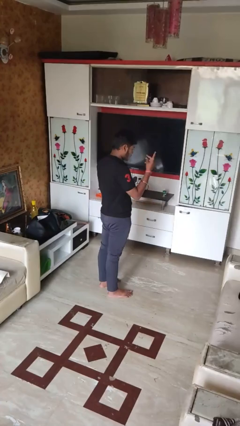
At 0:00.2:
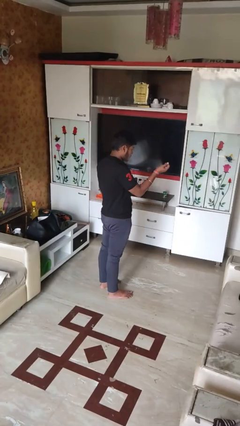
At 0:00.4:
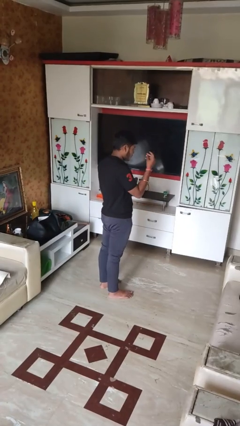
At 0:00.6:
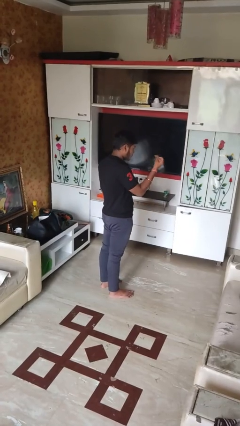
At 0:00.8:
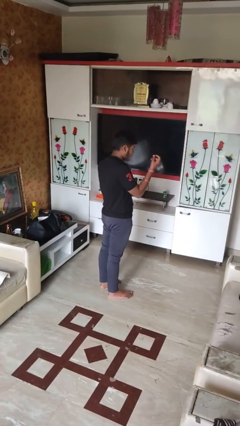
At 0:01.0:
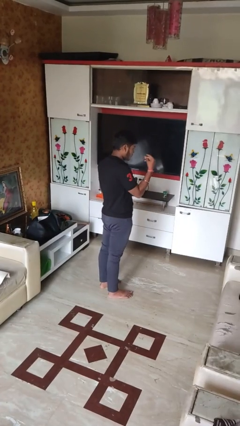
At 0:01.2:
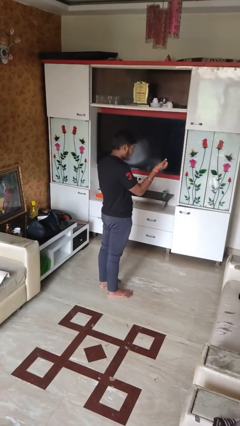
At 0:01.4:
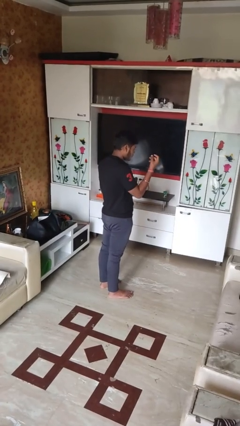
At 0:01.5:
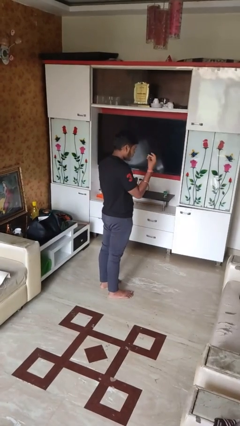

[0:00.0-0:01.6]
person snaps fingers

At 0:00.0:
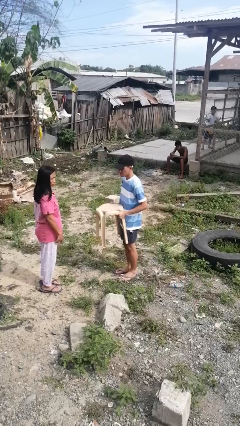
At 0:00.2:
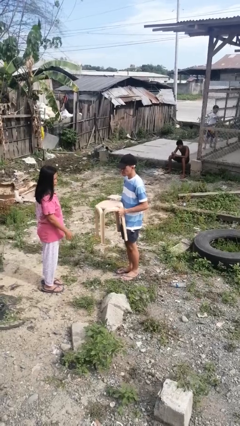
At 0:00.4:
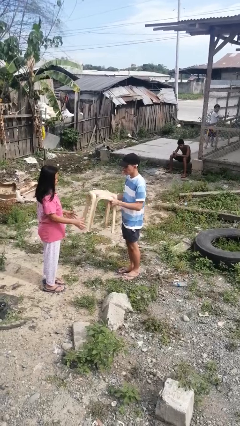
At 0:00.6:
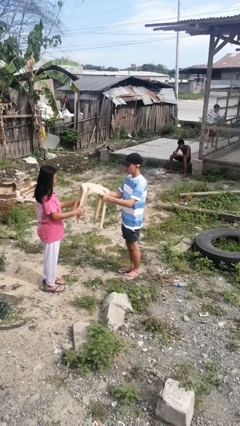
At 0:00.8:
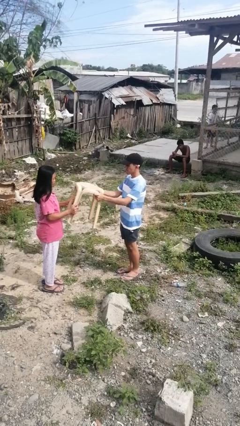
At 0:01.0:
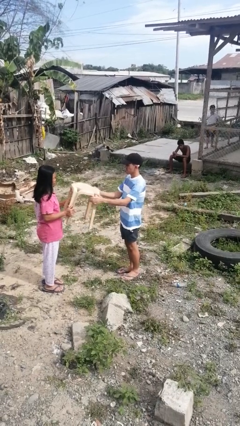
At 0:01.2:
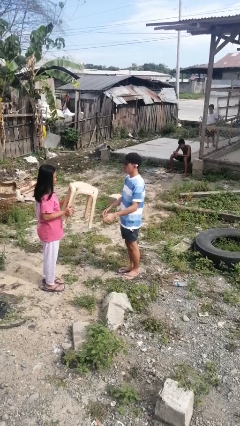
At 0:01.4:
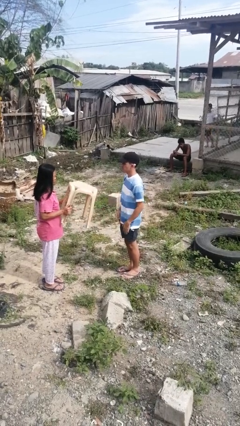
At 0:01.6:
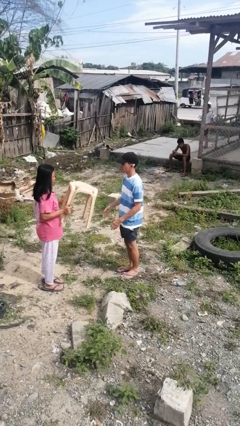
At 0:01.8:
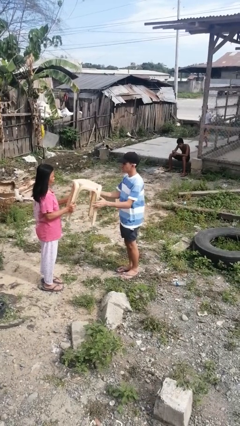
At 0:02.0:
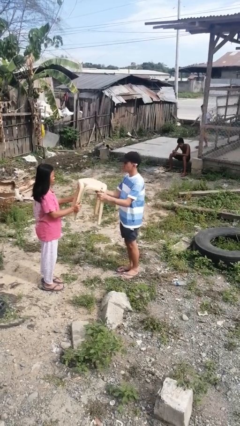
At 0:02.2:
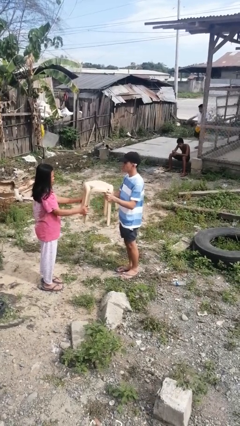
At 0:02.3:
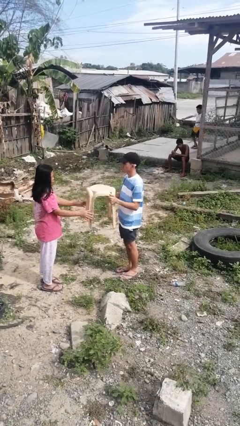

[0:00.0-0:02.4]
person transfers object to person

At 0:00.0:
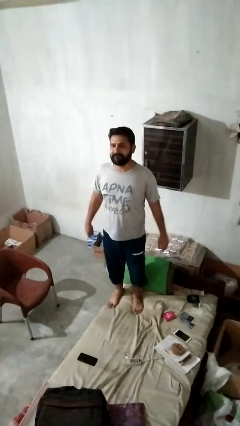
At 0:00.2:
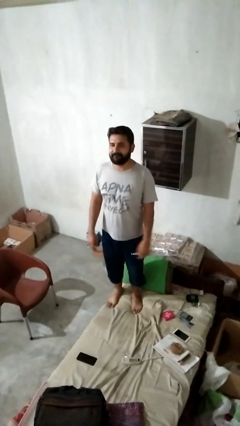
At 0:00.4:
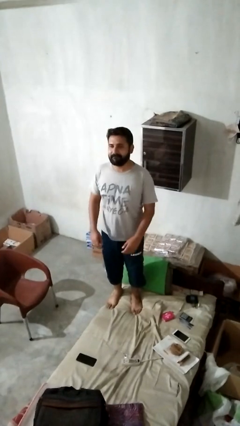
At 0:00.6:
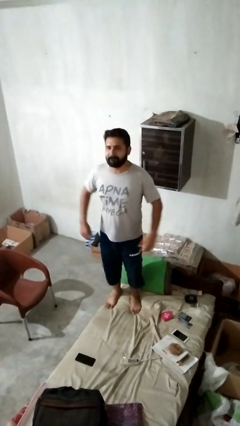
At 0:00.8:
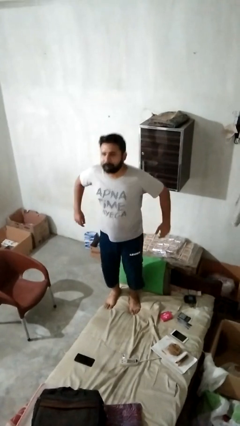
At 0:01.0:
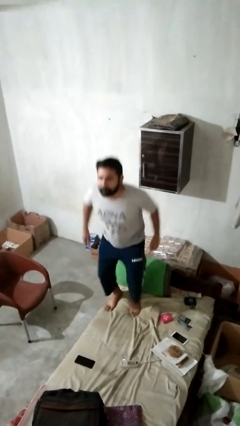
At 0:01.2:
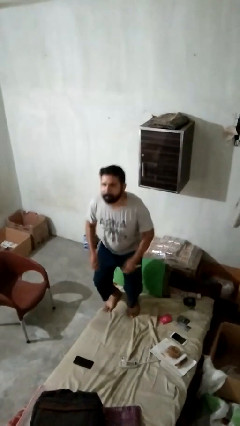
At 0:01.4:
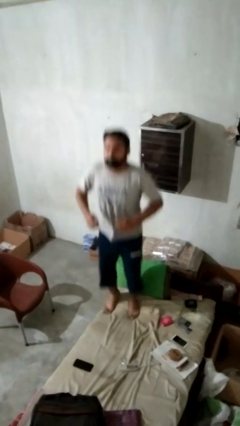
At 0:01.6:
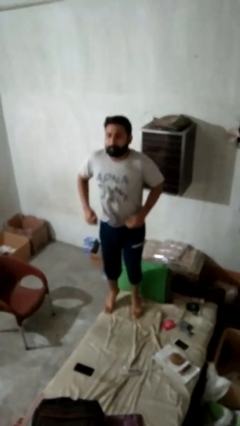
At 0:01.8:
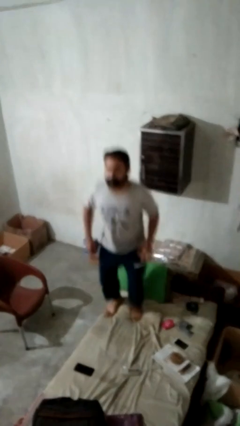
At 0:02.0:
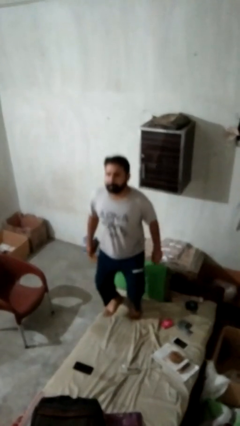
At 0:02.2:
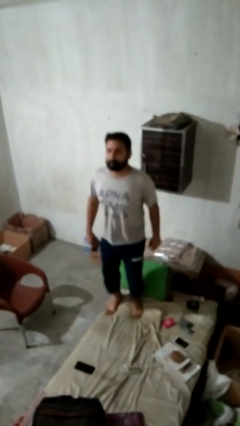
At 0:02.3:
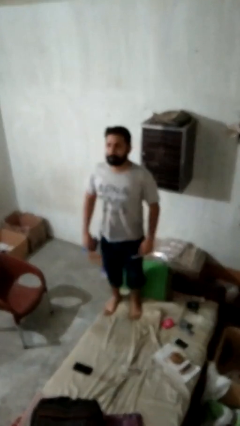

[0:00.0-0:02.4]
person jumps on bed

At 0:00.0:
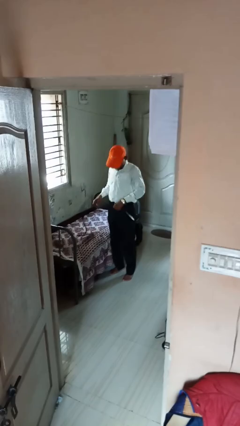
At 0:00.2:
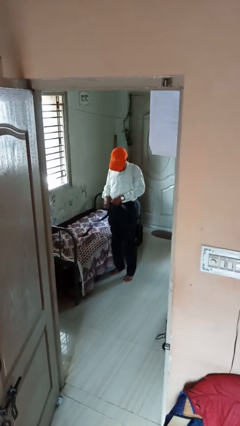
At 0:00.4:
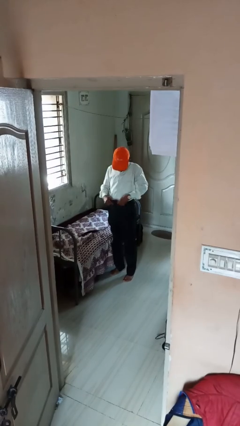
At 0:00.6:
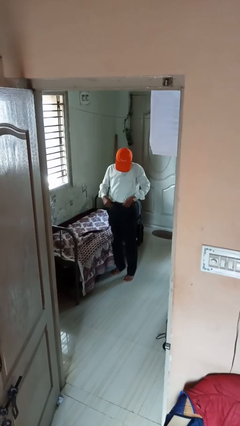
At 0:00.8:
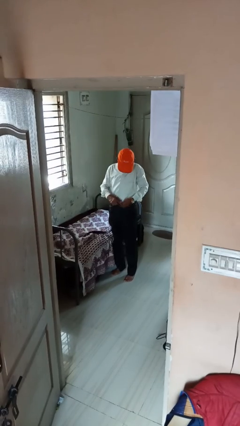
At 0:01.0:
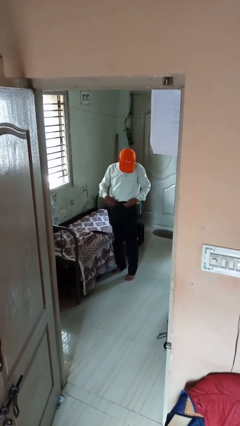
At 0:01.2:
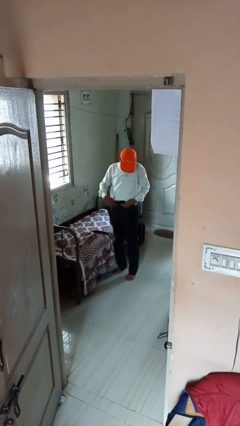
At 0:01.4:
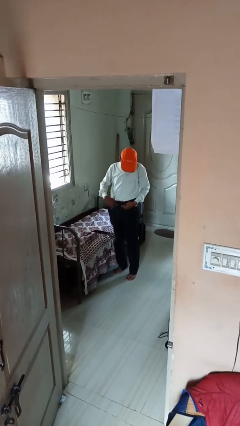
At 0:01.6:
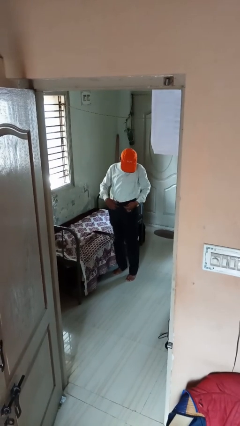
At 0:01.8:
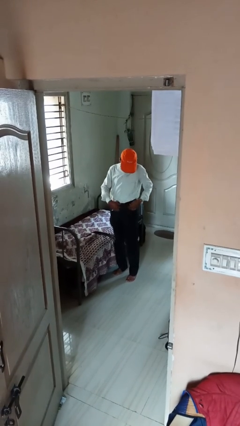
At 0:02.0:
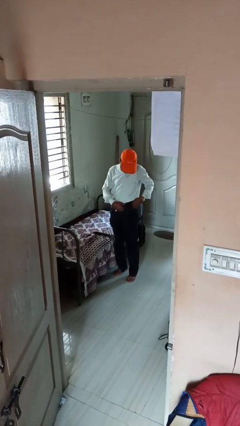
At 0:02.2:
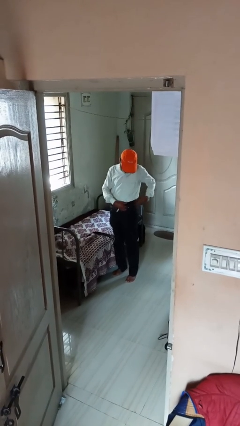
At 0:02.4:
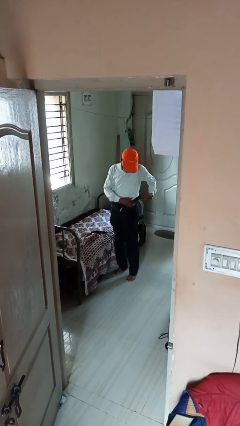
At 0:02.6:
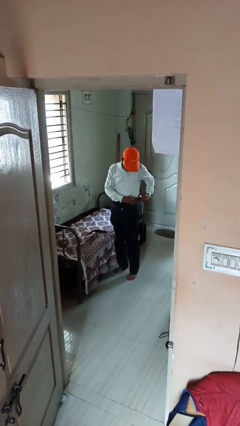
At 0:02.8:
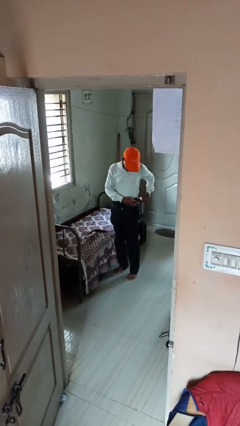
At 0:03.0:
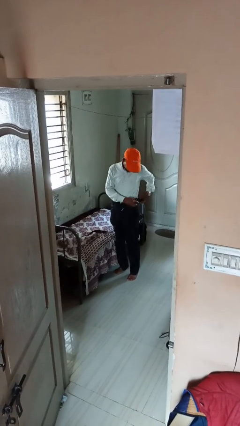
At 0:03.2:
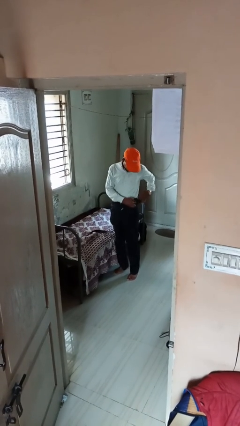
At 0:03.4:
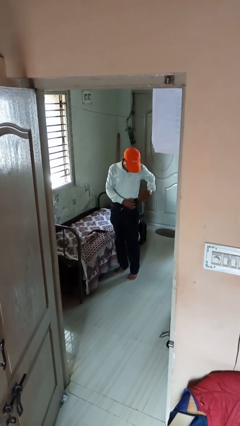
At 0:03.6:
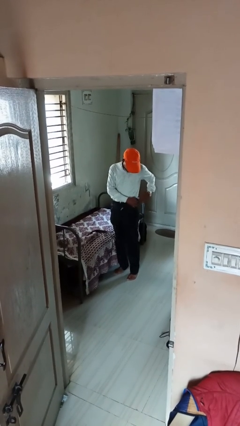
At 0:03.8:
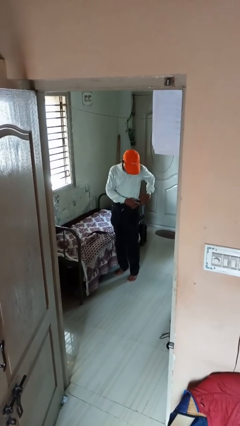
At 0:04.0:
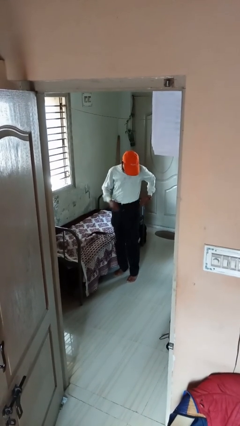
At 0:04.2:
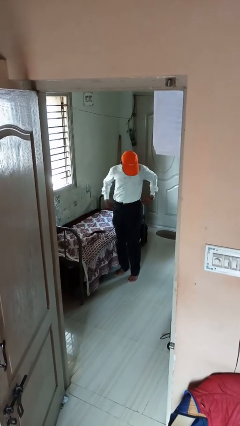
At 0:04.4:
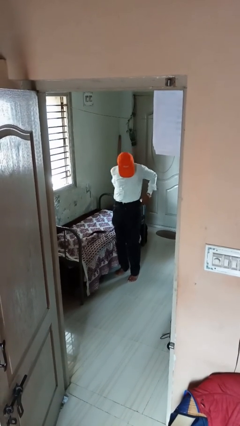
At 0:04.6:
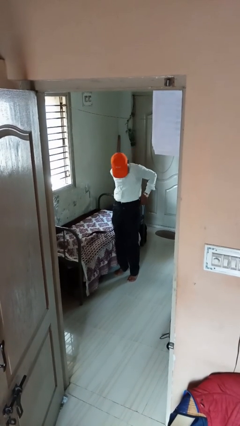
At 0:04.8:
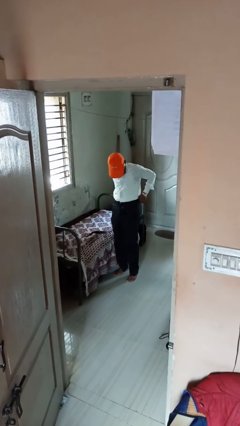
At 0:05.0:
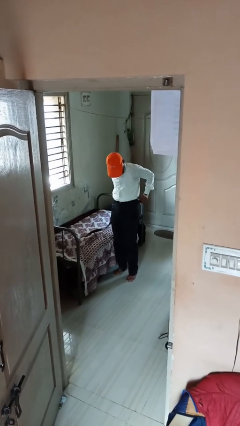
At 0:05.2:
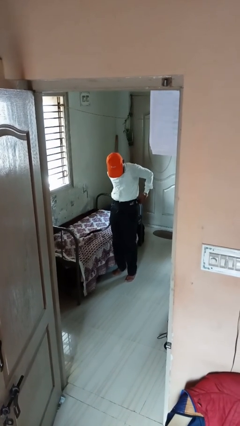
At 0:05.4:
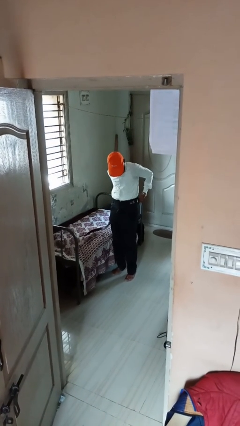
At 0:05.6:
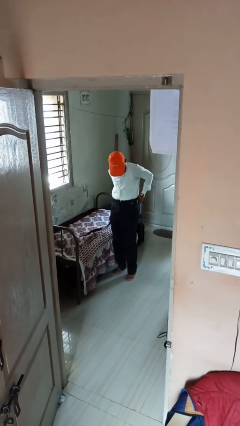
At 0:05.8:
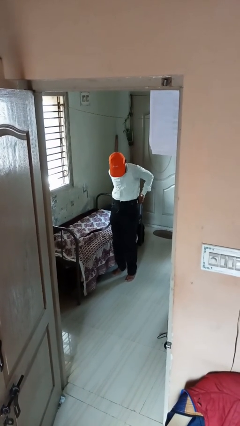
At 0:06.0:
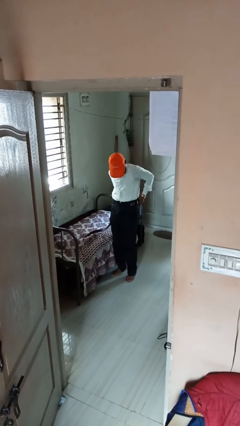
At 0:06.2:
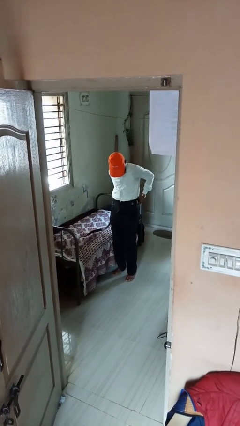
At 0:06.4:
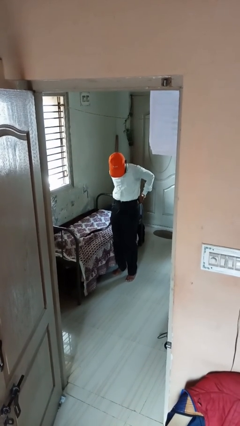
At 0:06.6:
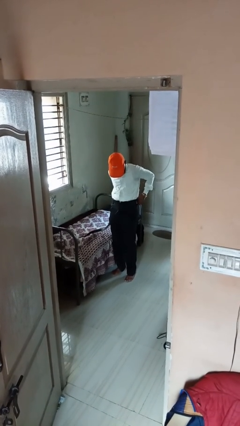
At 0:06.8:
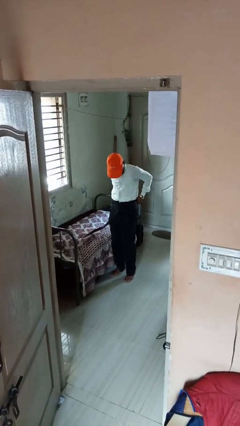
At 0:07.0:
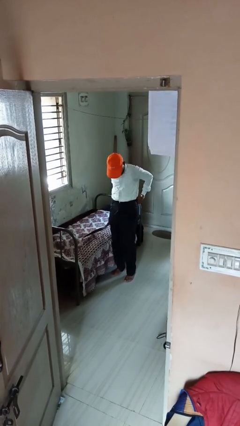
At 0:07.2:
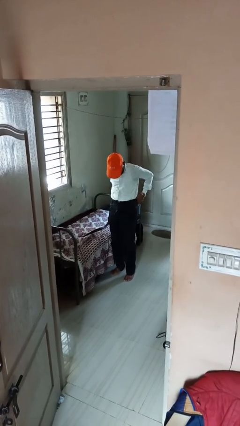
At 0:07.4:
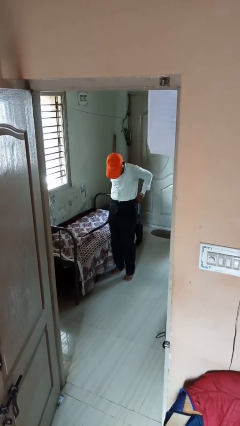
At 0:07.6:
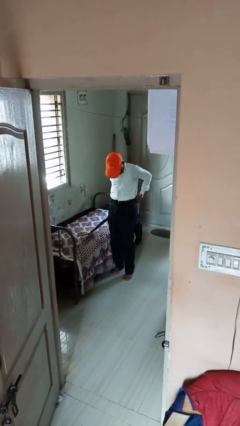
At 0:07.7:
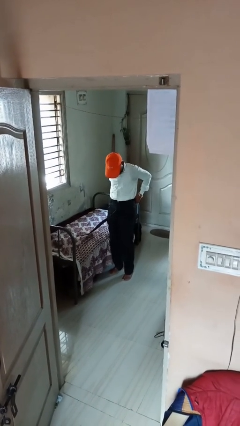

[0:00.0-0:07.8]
person puts on belt

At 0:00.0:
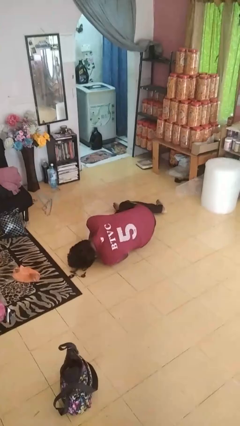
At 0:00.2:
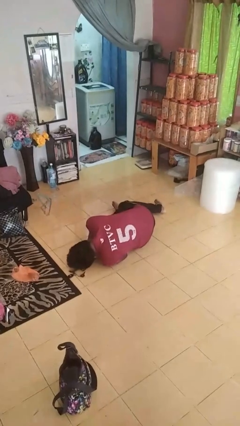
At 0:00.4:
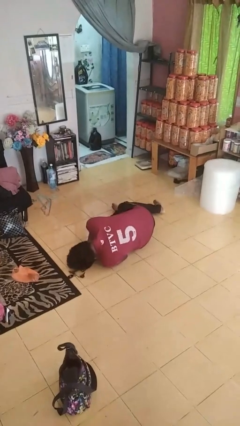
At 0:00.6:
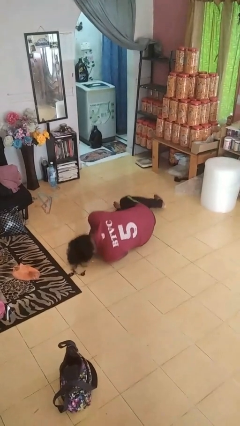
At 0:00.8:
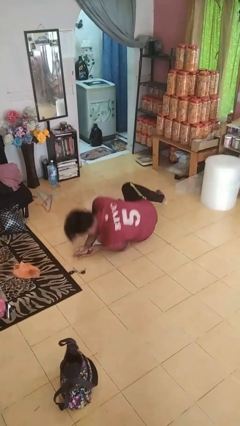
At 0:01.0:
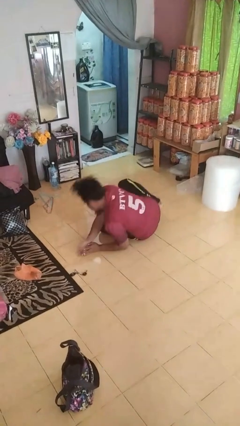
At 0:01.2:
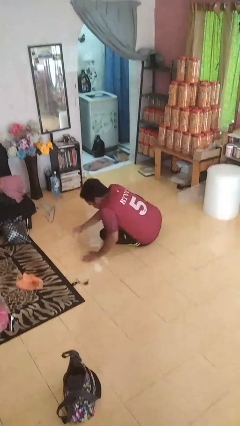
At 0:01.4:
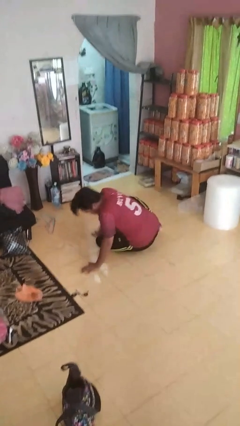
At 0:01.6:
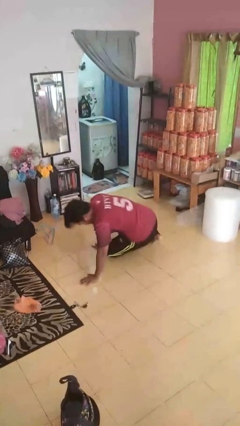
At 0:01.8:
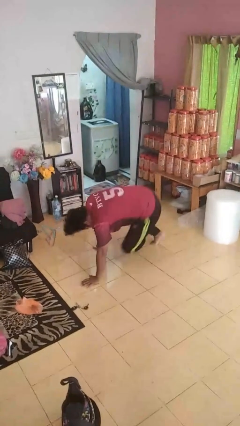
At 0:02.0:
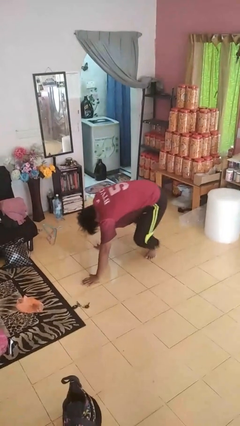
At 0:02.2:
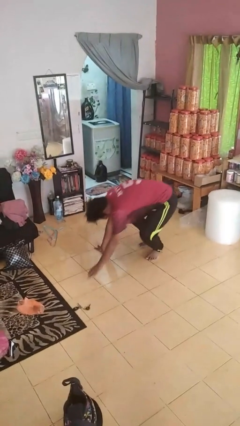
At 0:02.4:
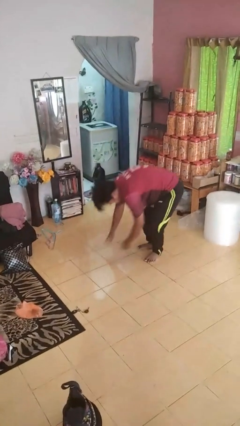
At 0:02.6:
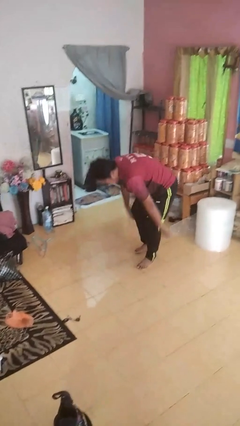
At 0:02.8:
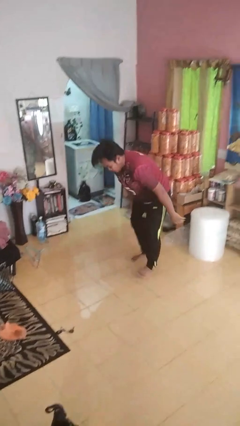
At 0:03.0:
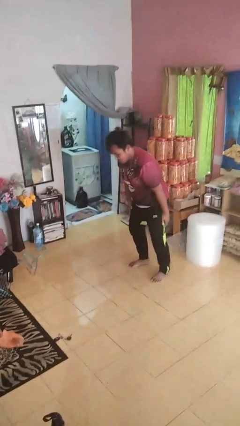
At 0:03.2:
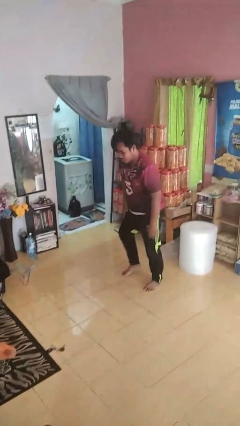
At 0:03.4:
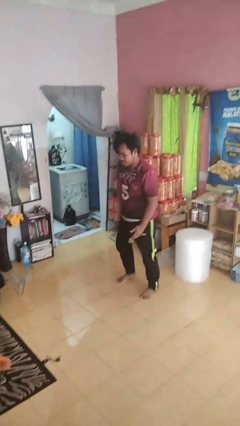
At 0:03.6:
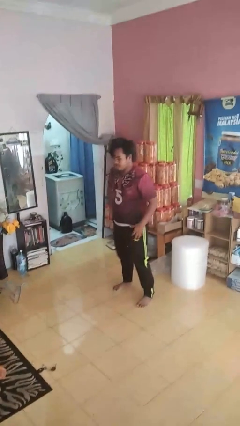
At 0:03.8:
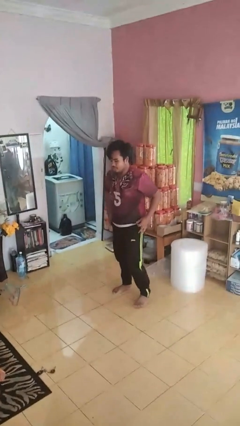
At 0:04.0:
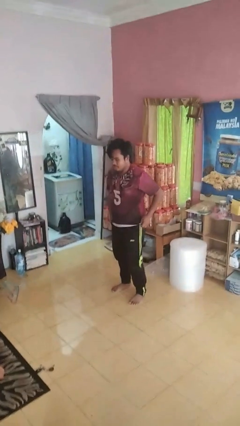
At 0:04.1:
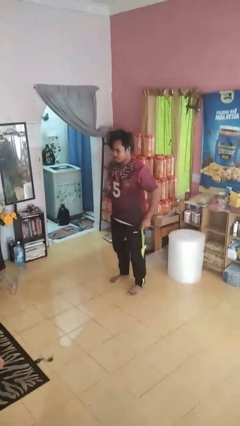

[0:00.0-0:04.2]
person stands up from floor
